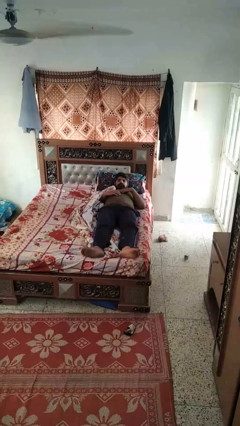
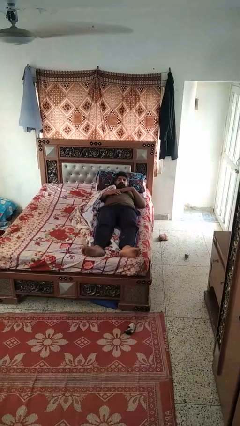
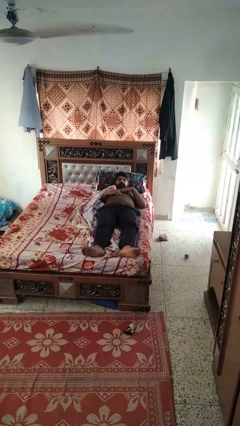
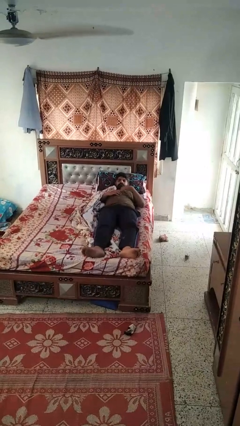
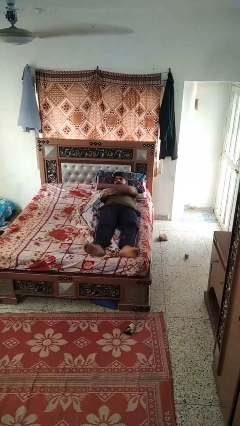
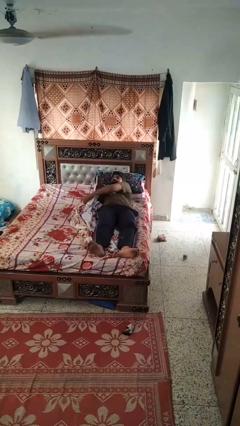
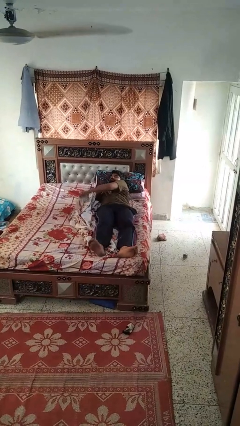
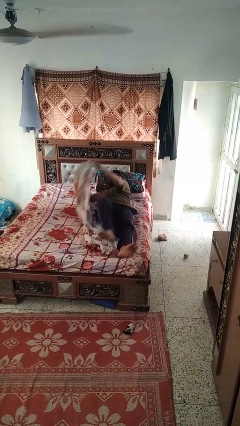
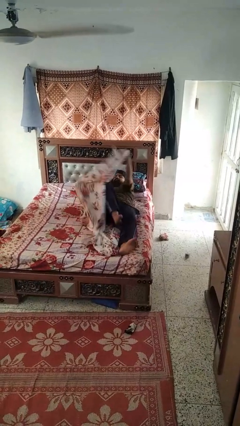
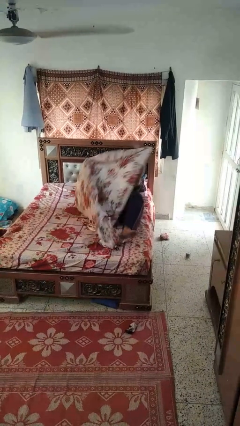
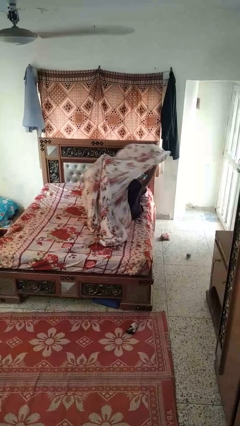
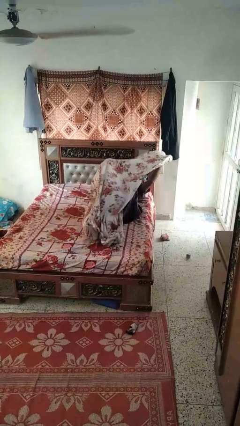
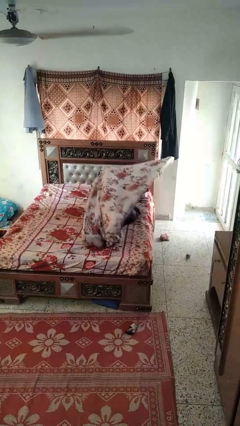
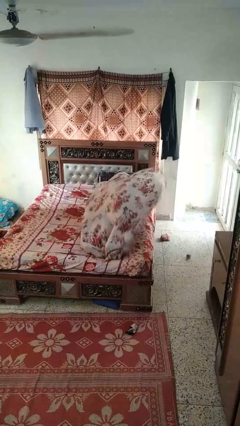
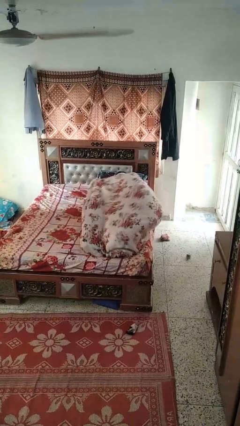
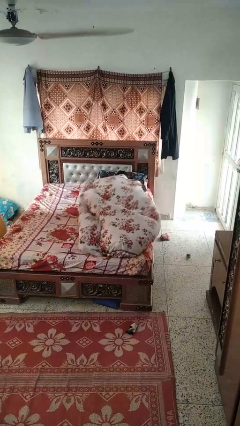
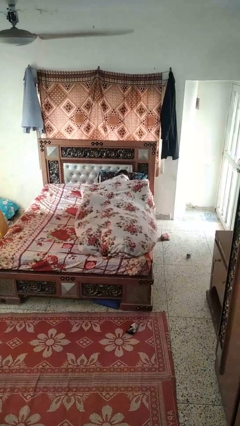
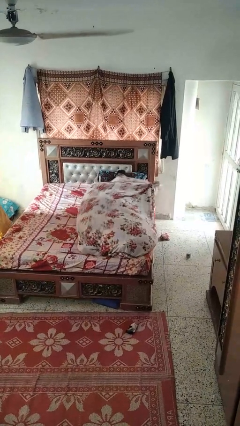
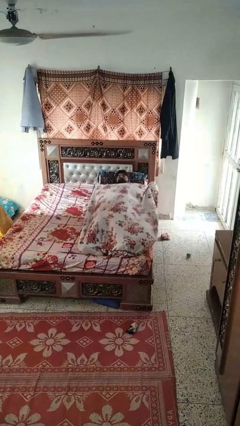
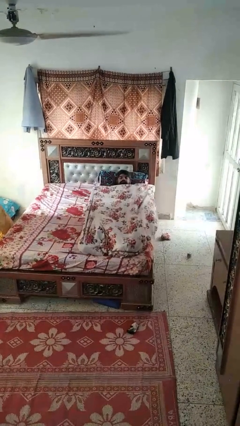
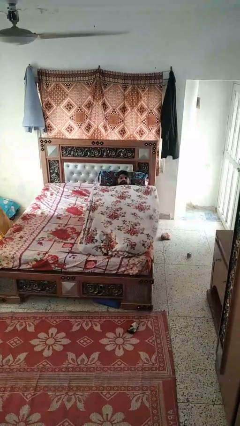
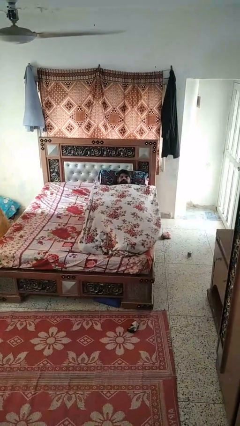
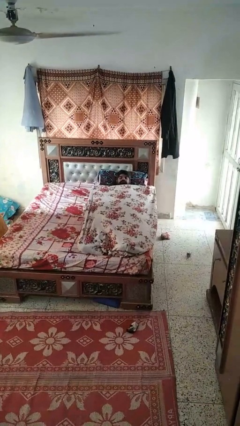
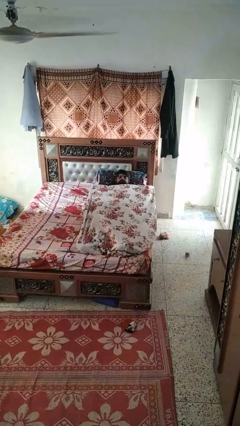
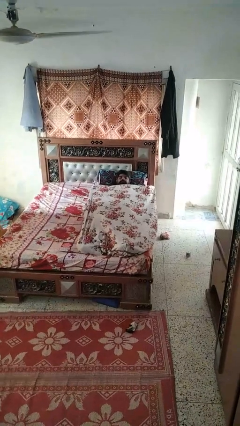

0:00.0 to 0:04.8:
person covers with bedsheets

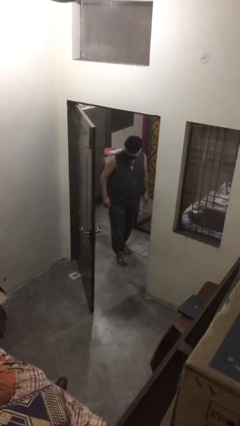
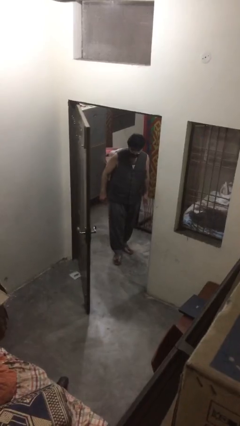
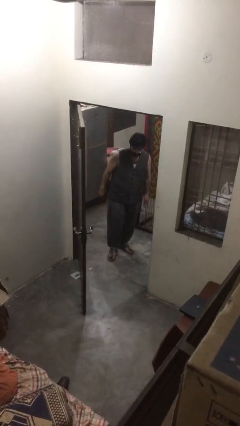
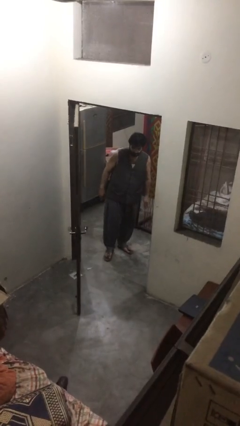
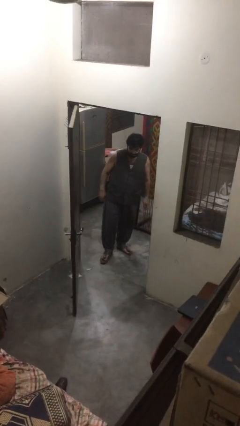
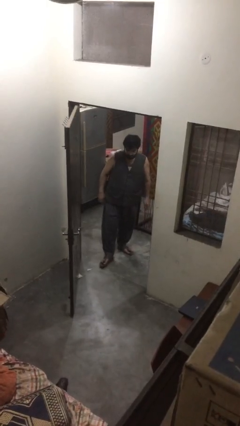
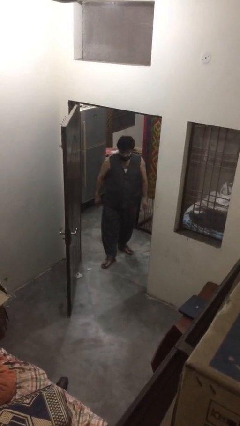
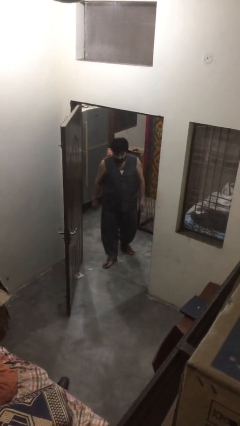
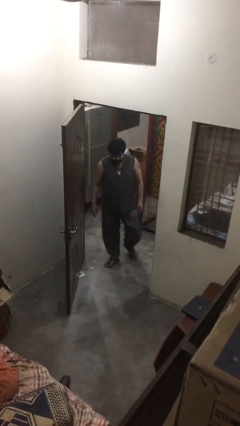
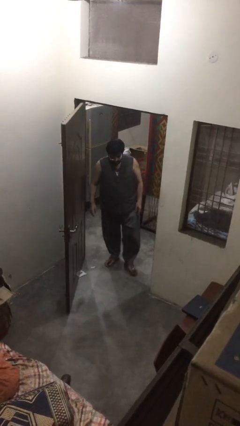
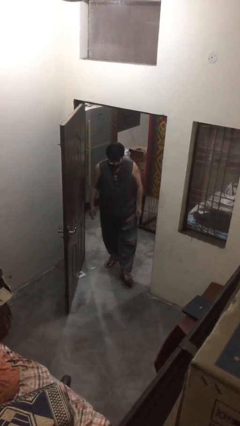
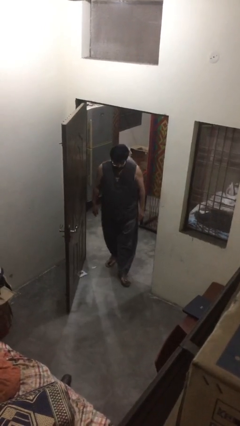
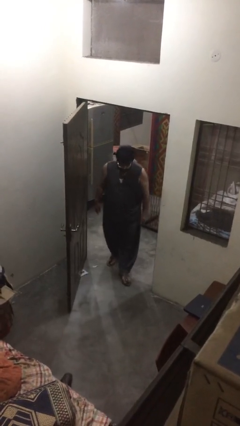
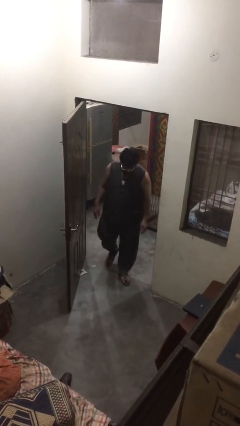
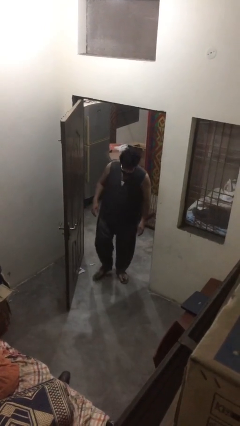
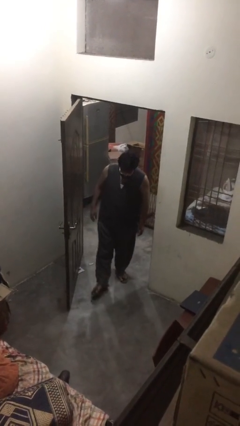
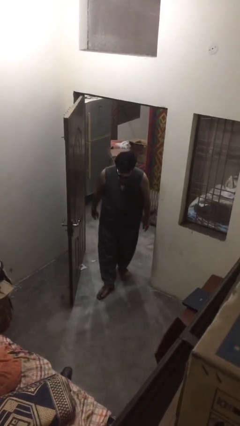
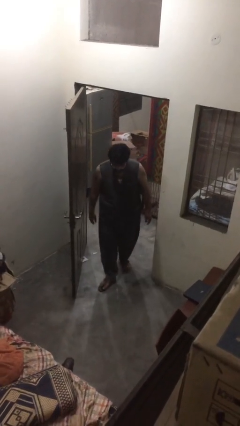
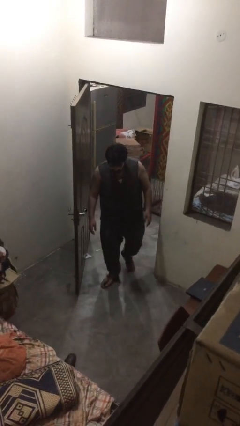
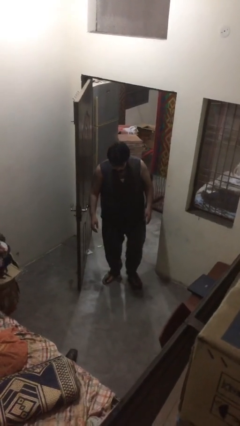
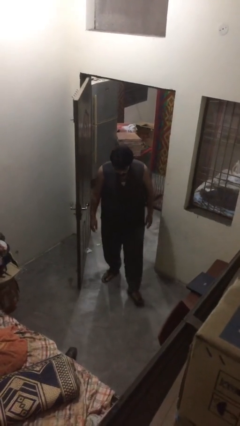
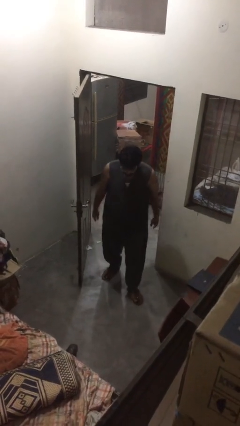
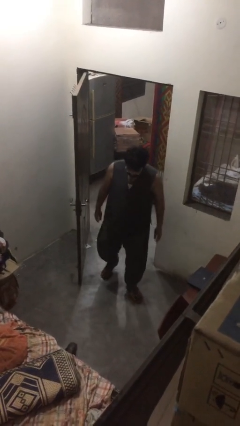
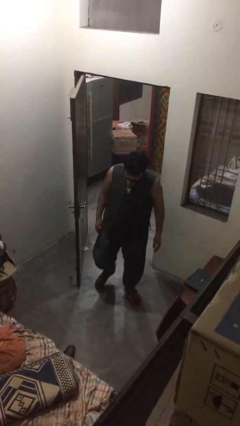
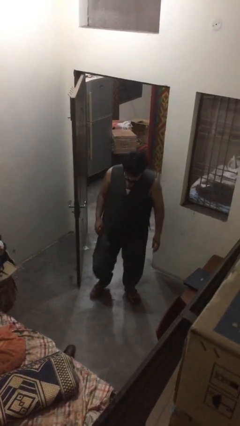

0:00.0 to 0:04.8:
person enters scene through structure

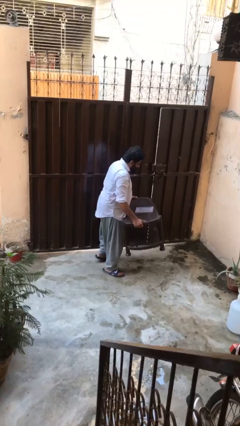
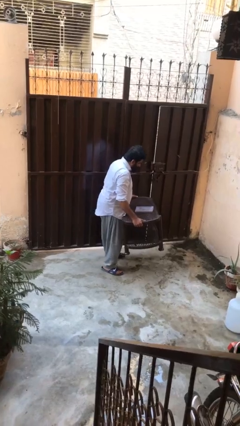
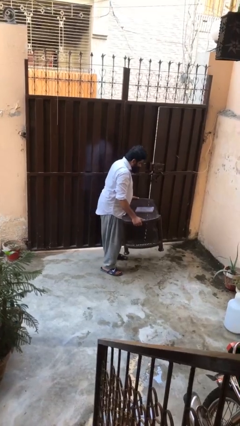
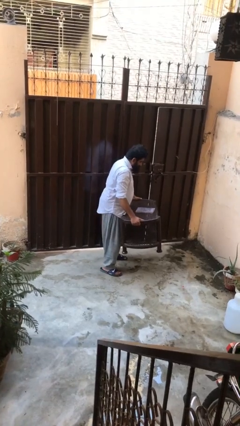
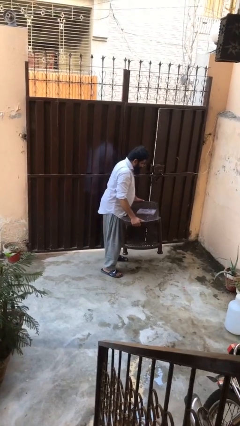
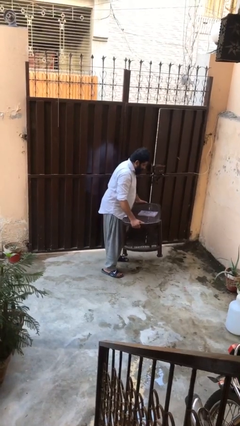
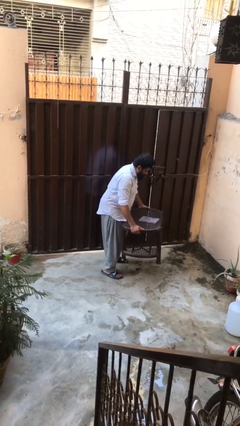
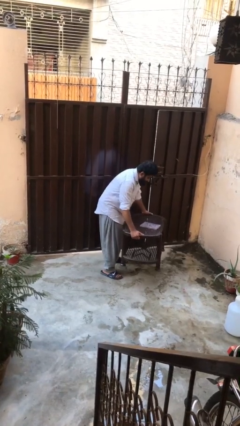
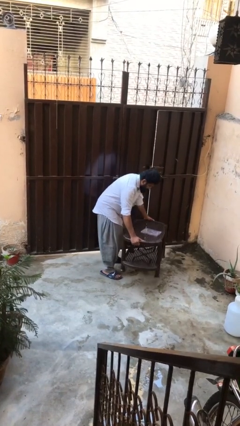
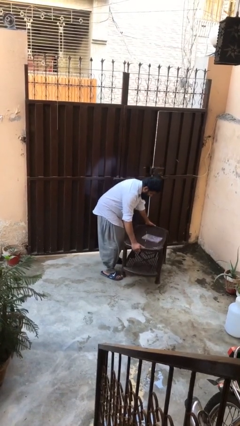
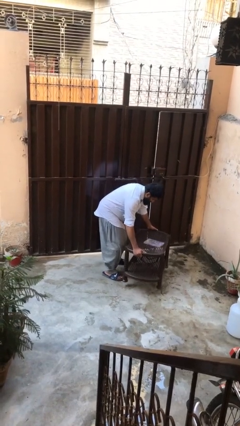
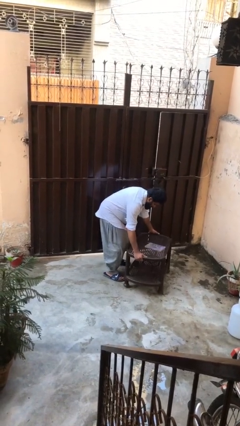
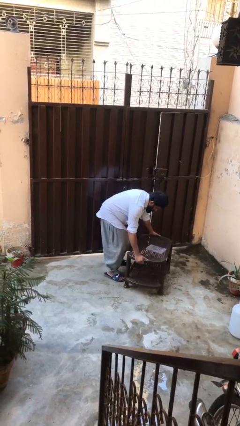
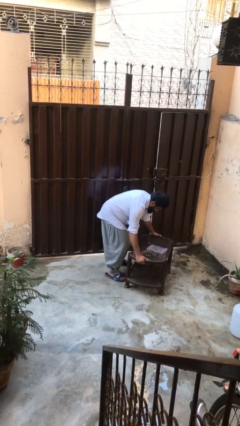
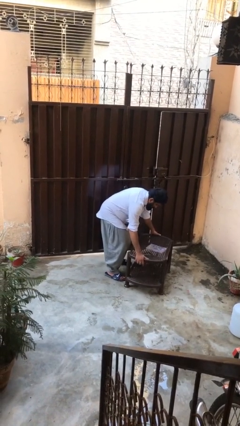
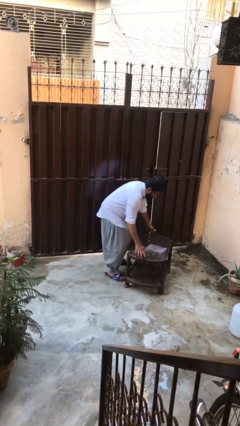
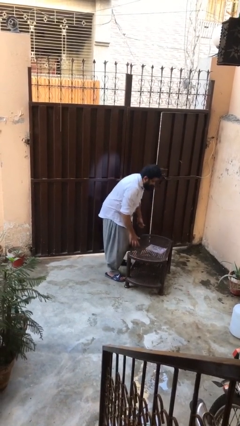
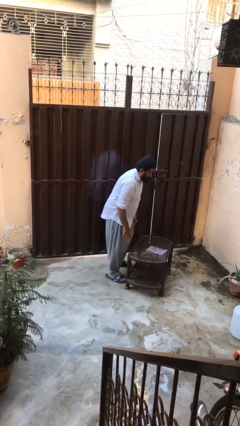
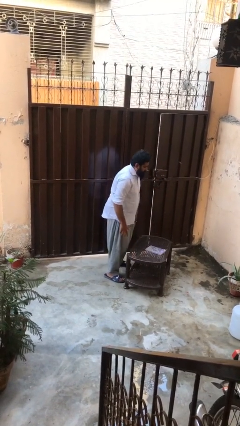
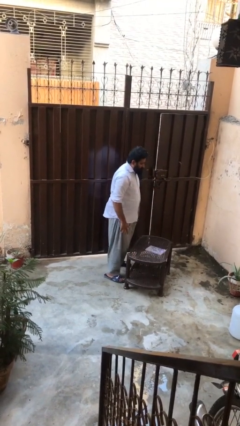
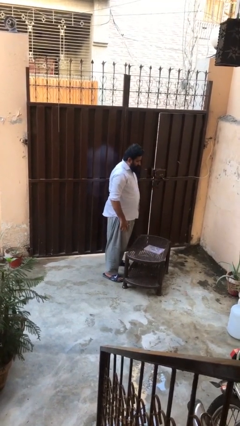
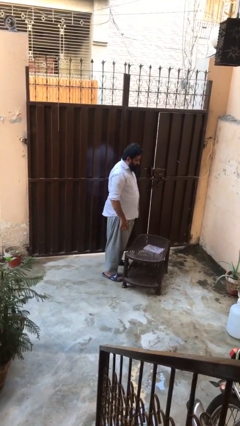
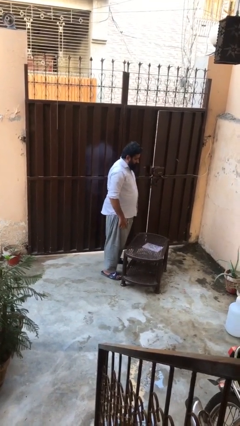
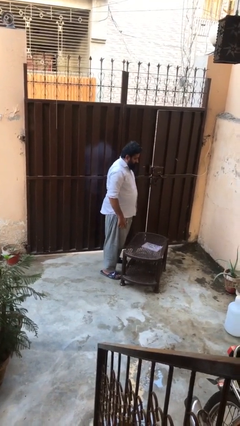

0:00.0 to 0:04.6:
person puts down object on floor

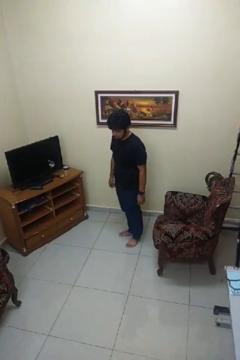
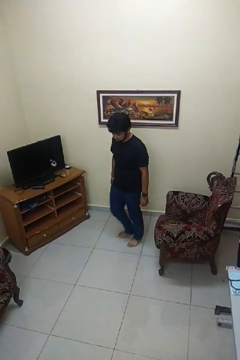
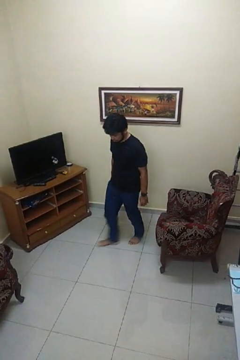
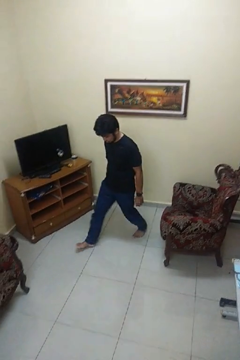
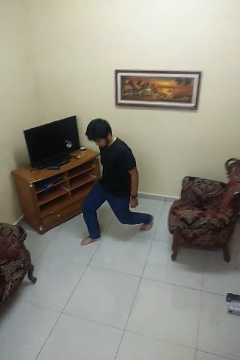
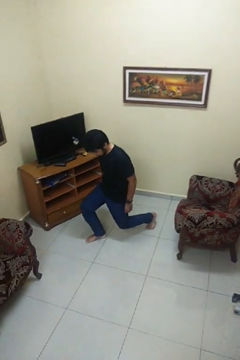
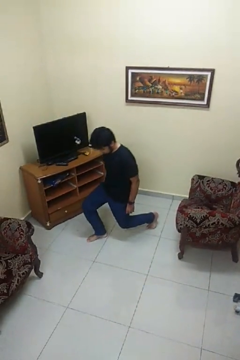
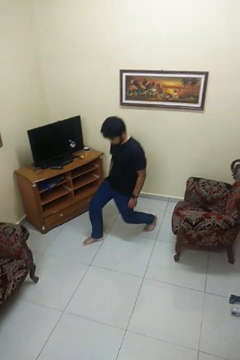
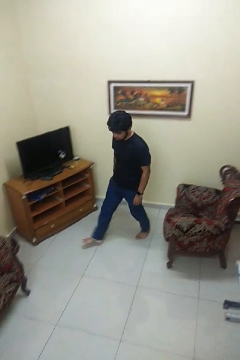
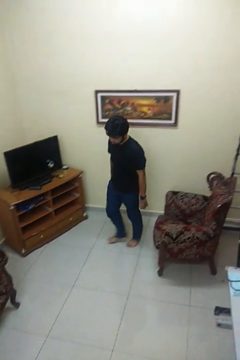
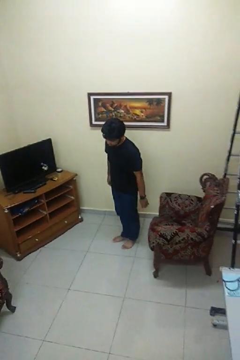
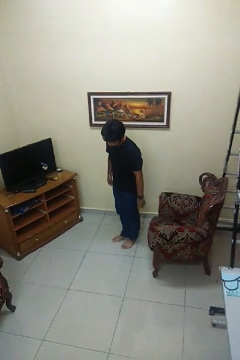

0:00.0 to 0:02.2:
person exercises with lunges

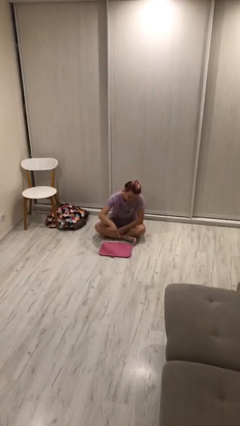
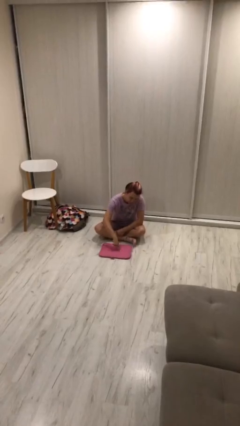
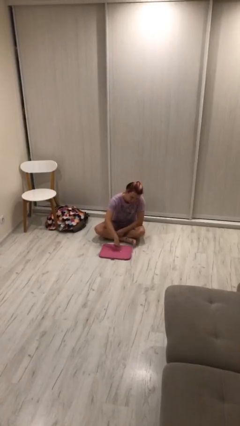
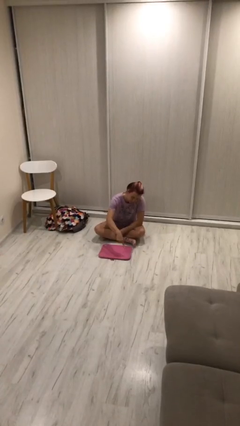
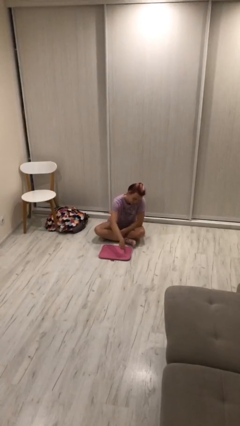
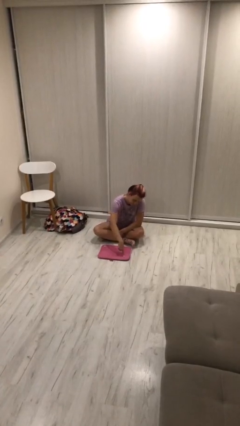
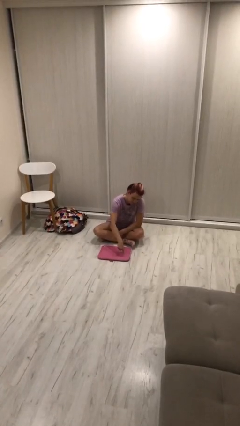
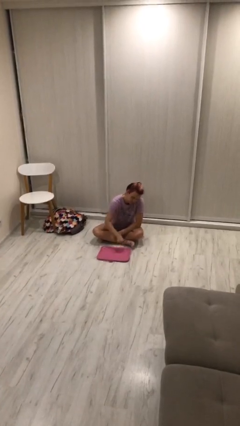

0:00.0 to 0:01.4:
person taps object with finger
